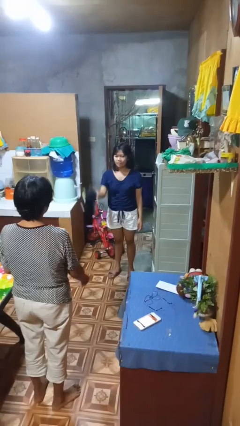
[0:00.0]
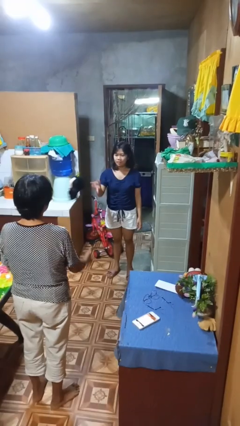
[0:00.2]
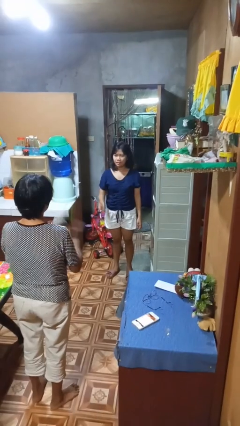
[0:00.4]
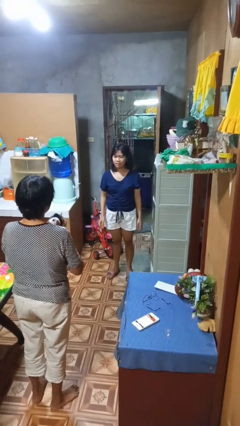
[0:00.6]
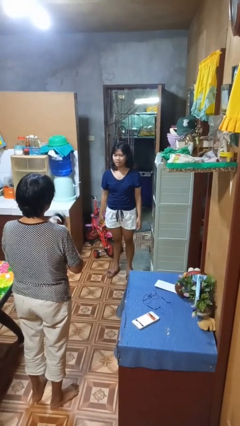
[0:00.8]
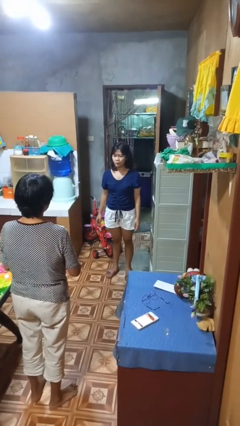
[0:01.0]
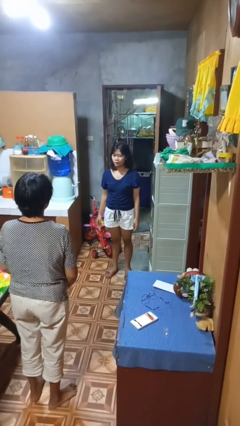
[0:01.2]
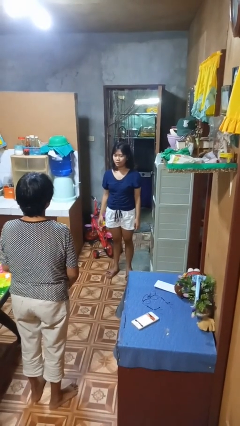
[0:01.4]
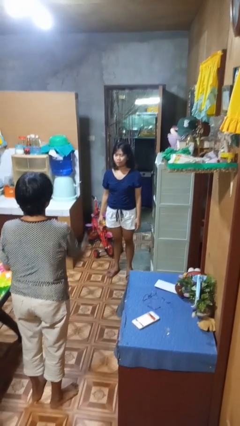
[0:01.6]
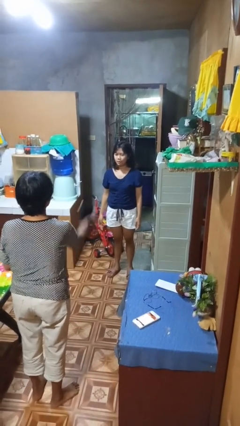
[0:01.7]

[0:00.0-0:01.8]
person throws object to person

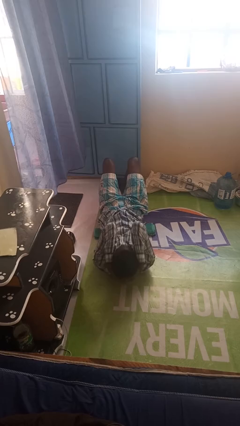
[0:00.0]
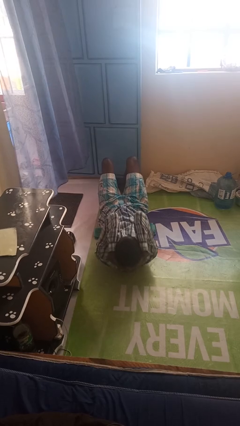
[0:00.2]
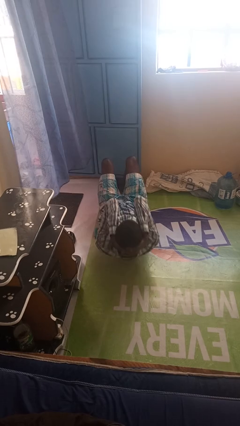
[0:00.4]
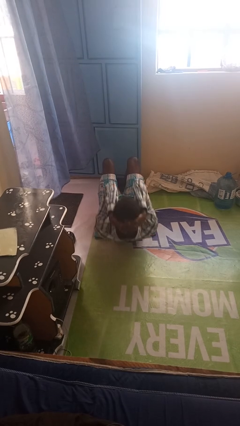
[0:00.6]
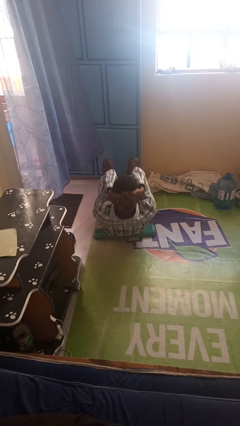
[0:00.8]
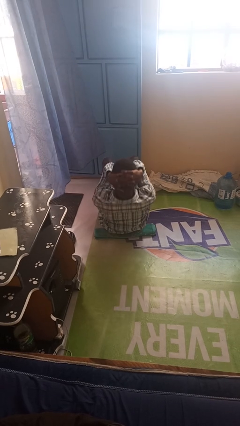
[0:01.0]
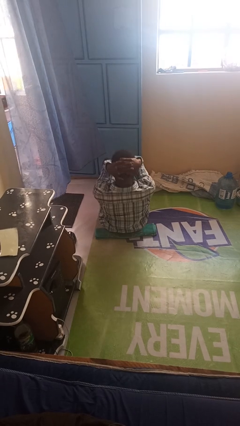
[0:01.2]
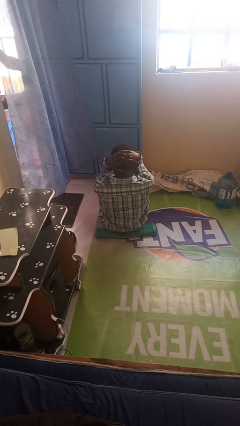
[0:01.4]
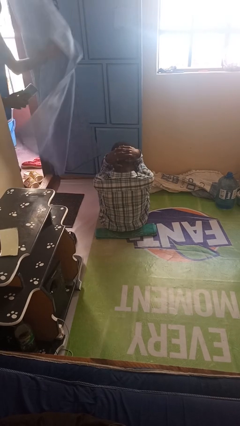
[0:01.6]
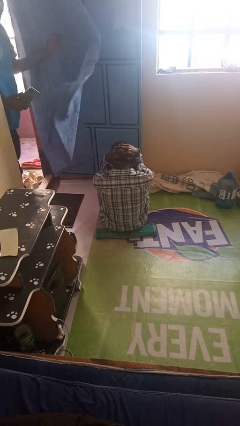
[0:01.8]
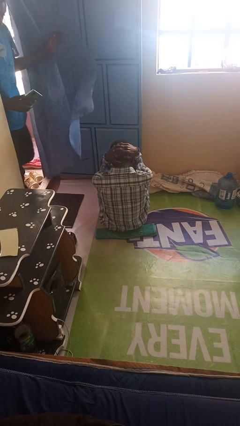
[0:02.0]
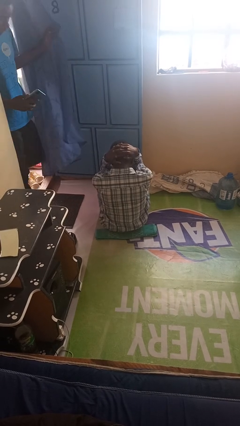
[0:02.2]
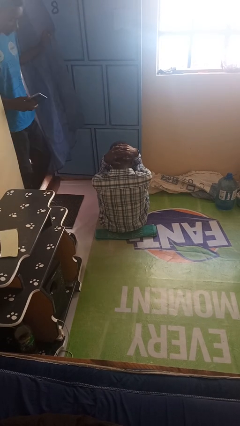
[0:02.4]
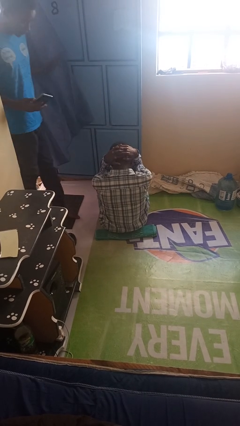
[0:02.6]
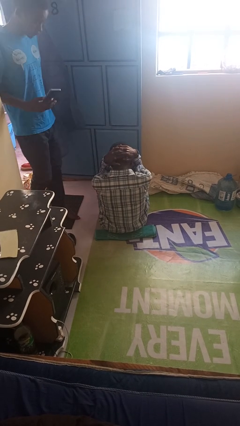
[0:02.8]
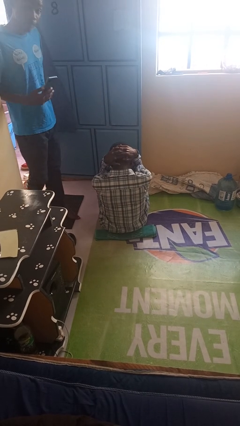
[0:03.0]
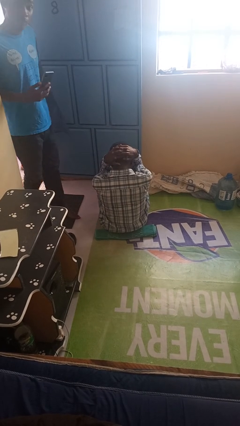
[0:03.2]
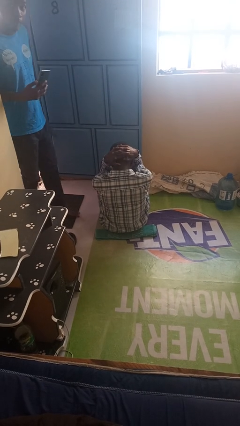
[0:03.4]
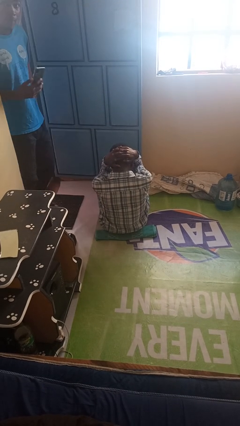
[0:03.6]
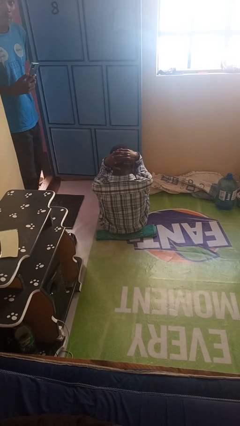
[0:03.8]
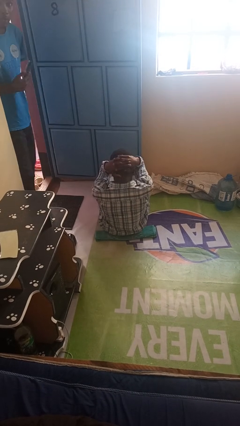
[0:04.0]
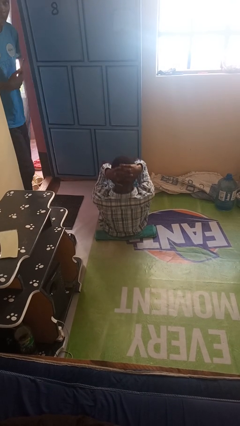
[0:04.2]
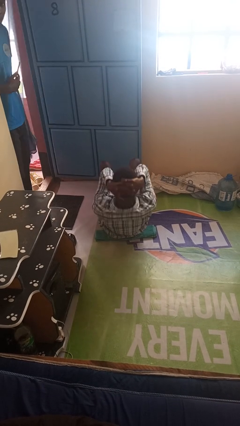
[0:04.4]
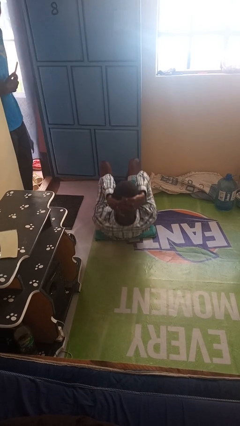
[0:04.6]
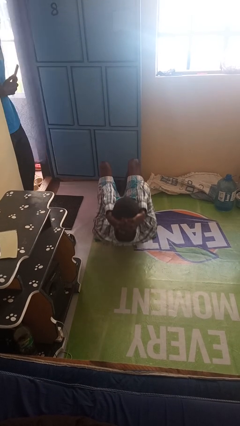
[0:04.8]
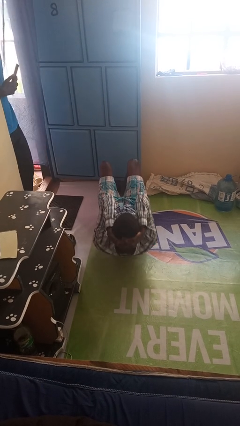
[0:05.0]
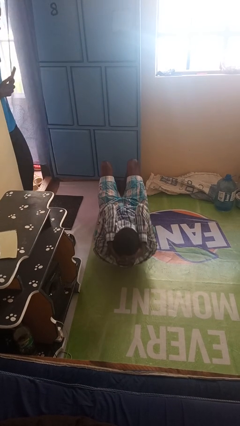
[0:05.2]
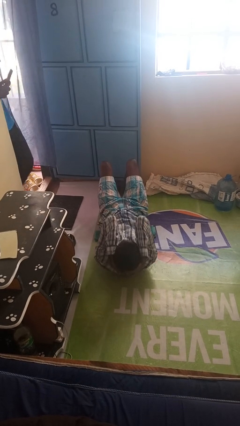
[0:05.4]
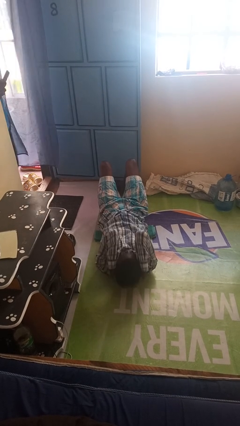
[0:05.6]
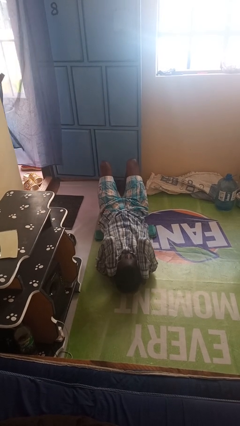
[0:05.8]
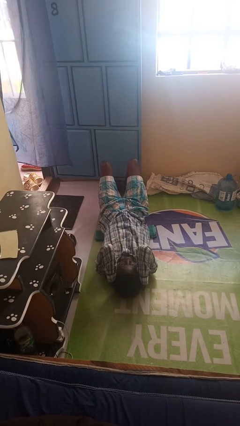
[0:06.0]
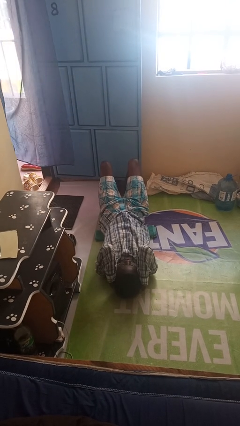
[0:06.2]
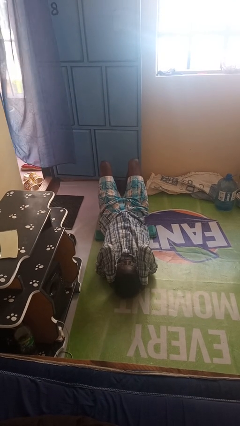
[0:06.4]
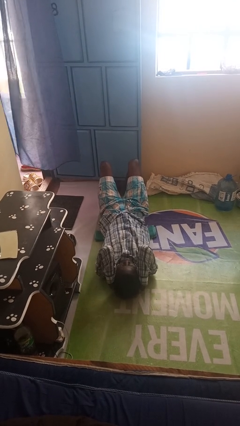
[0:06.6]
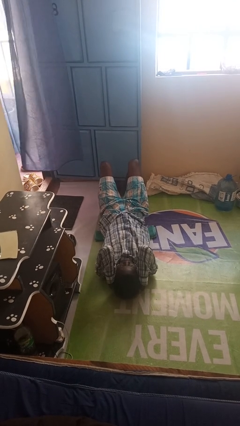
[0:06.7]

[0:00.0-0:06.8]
person exercises with situp

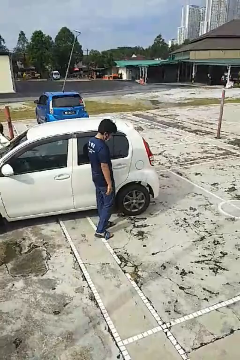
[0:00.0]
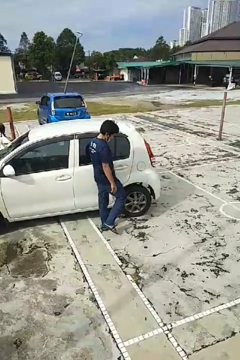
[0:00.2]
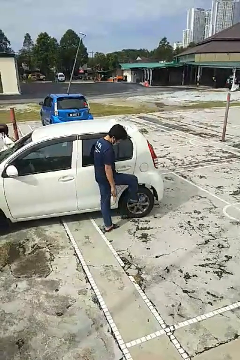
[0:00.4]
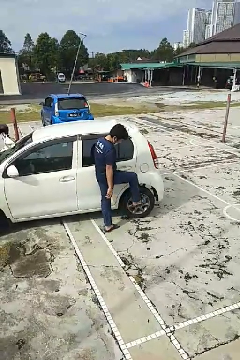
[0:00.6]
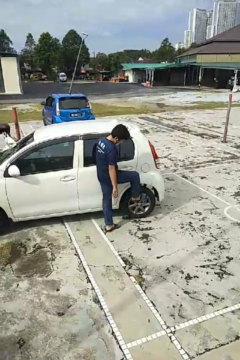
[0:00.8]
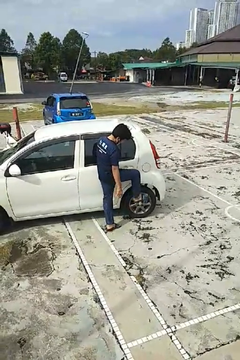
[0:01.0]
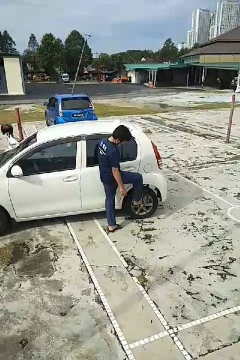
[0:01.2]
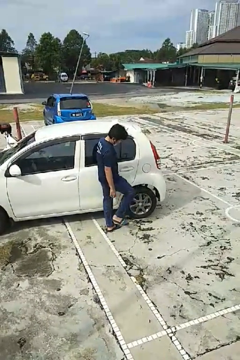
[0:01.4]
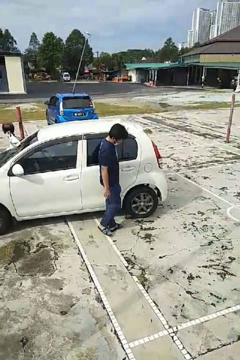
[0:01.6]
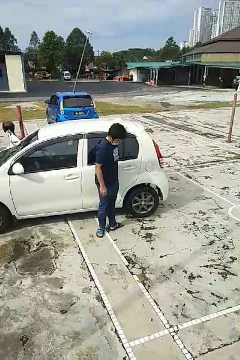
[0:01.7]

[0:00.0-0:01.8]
person kicks car tires

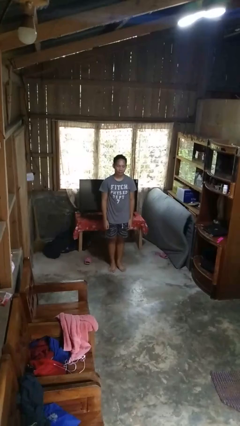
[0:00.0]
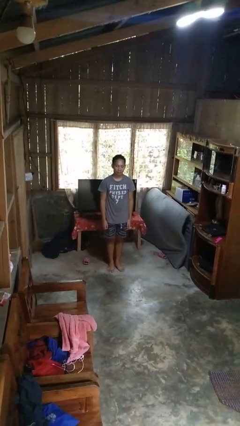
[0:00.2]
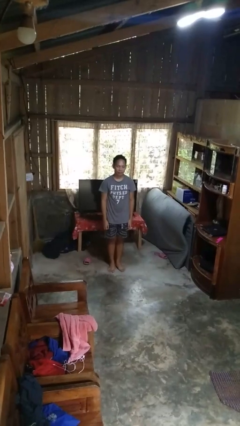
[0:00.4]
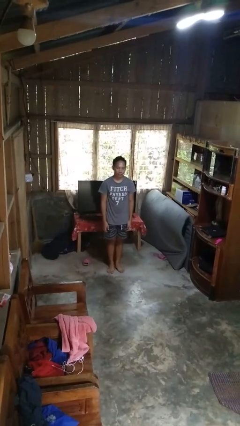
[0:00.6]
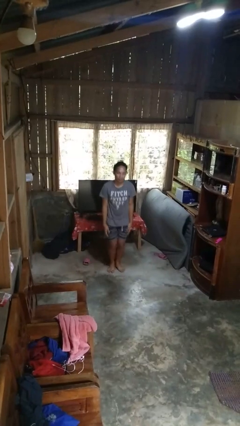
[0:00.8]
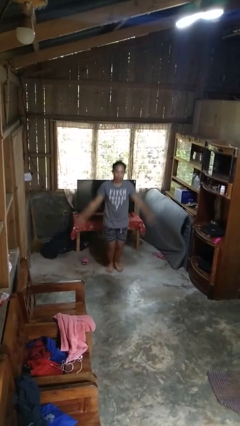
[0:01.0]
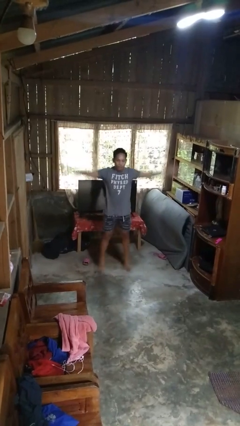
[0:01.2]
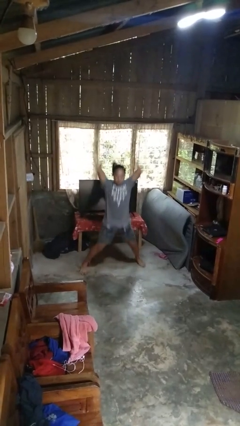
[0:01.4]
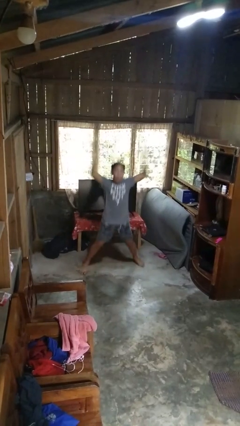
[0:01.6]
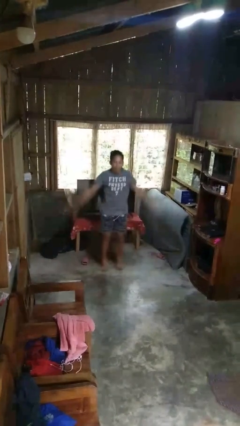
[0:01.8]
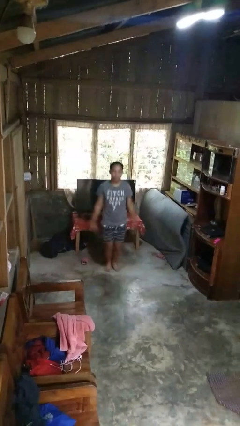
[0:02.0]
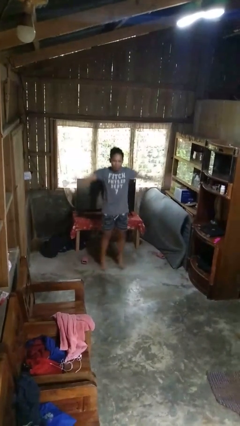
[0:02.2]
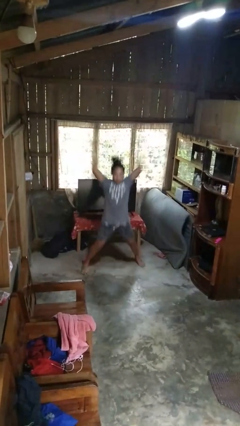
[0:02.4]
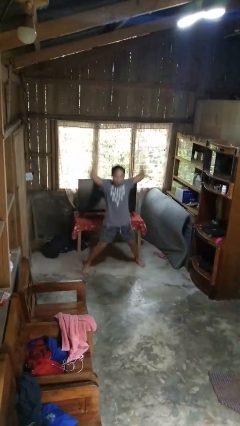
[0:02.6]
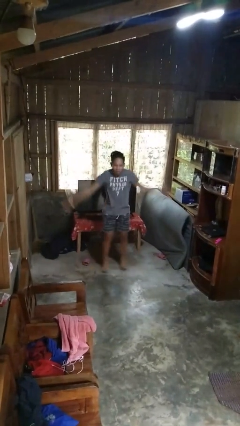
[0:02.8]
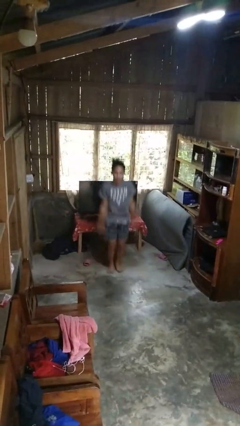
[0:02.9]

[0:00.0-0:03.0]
person exercises with jumping jacks

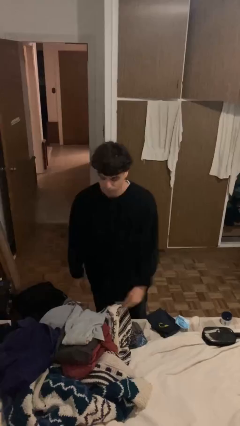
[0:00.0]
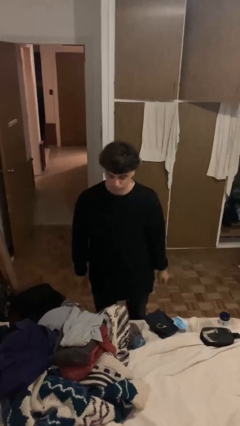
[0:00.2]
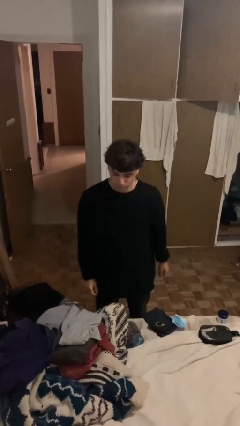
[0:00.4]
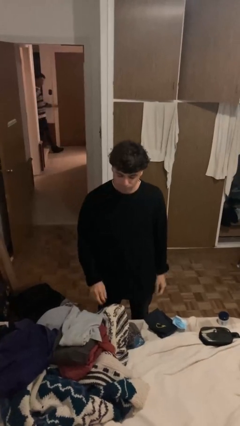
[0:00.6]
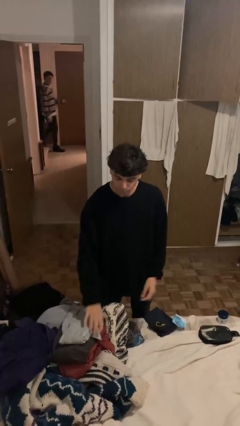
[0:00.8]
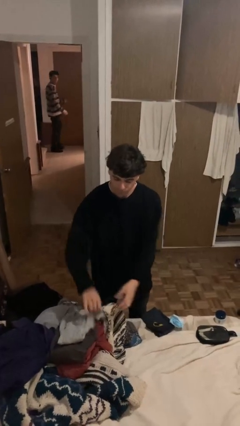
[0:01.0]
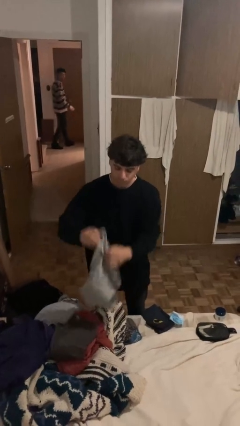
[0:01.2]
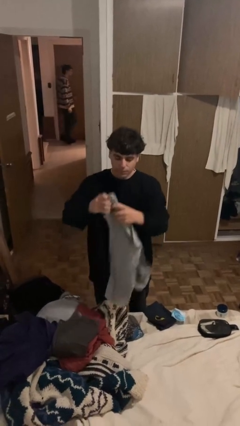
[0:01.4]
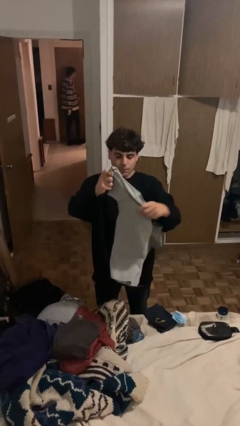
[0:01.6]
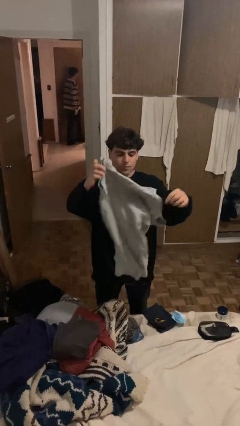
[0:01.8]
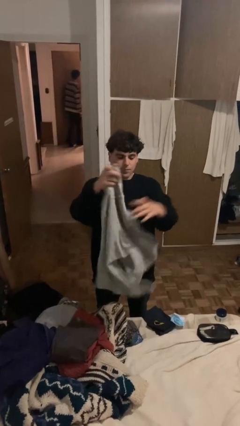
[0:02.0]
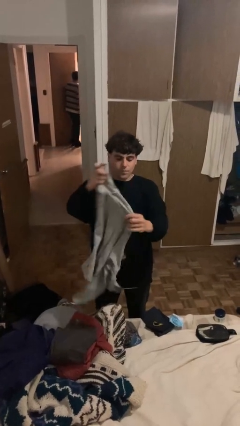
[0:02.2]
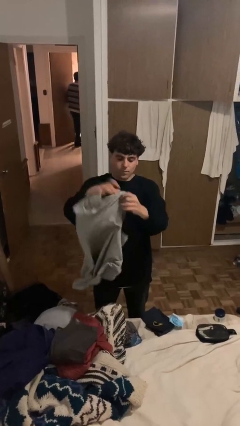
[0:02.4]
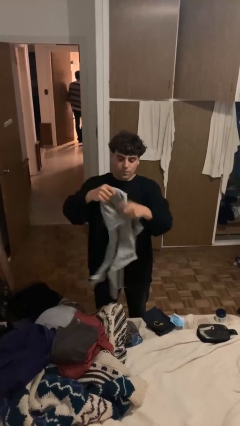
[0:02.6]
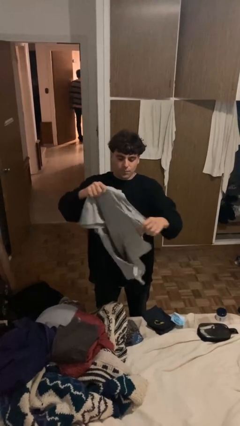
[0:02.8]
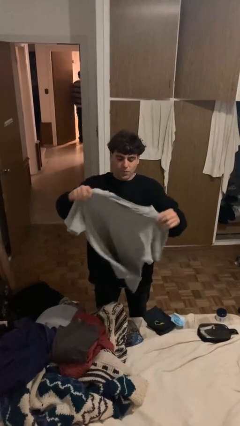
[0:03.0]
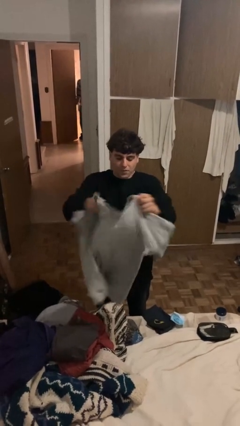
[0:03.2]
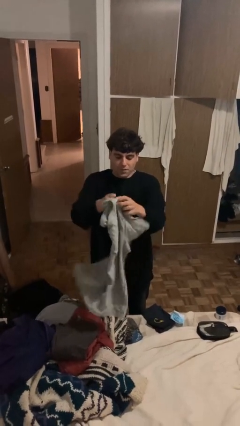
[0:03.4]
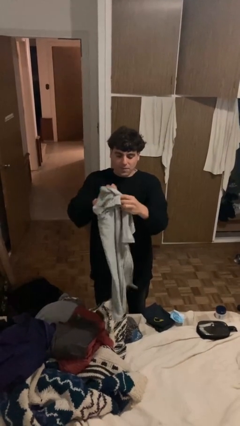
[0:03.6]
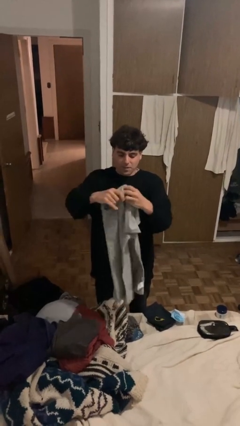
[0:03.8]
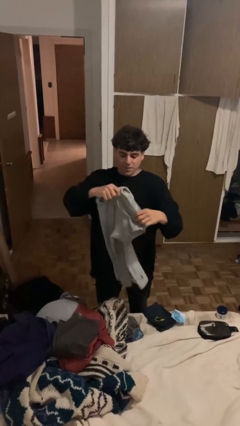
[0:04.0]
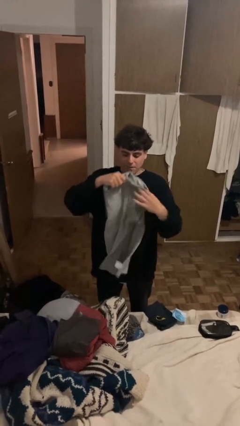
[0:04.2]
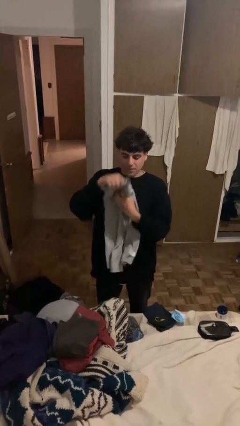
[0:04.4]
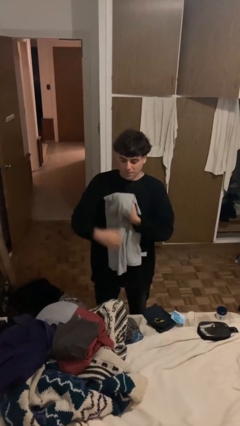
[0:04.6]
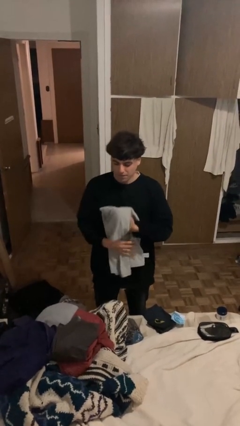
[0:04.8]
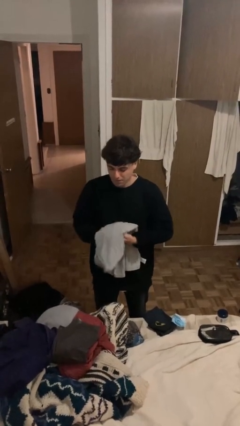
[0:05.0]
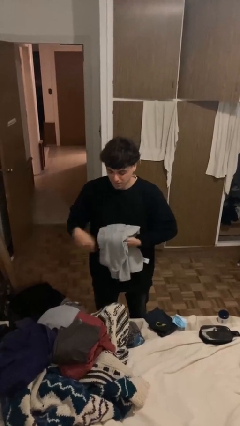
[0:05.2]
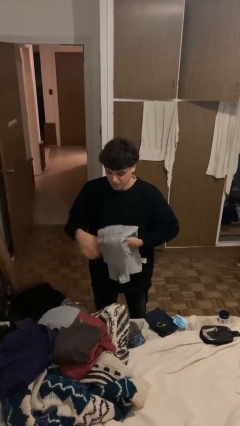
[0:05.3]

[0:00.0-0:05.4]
person folds shirt
